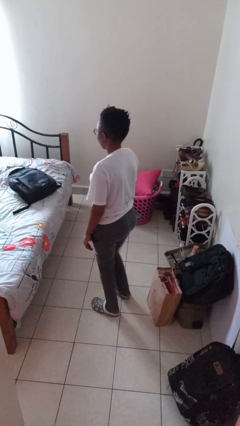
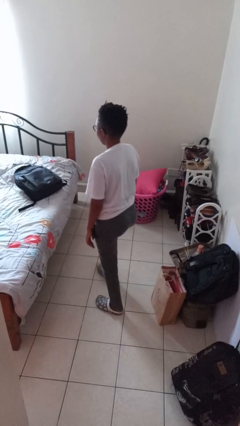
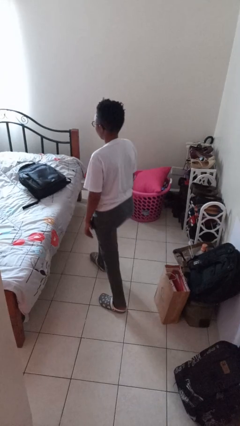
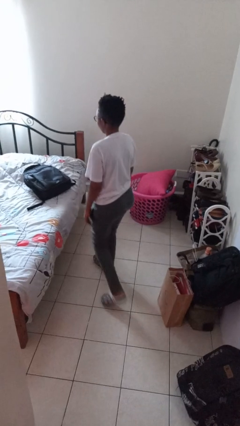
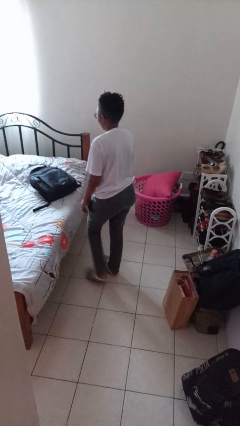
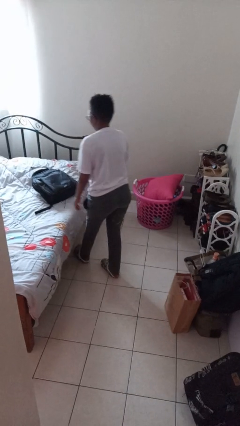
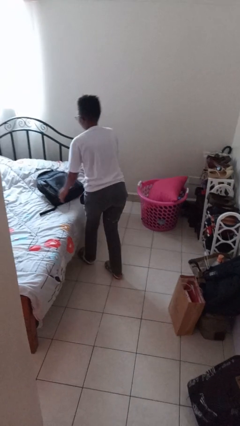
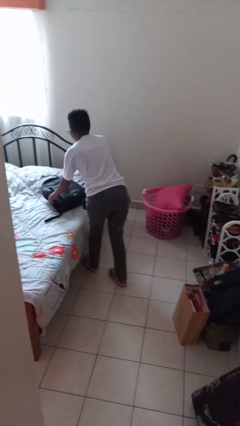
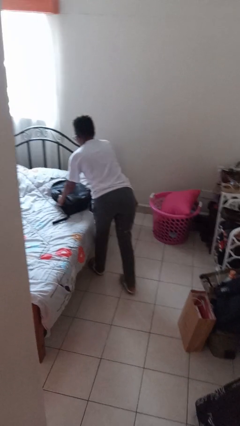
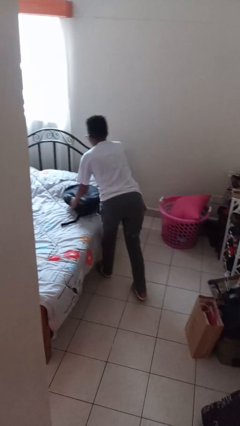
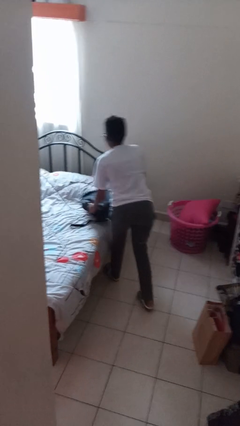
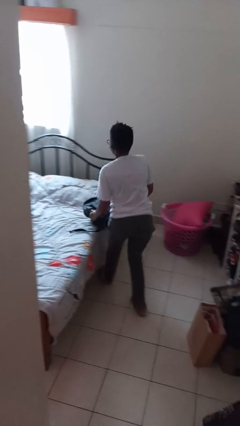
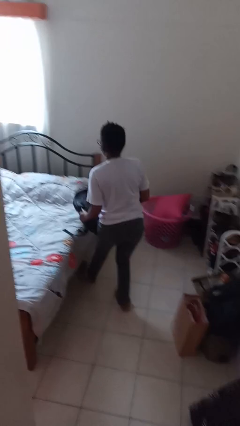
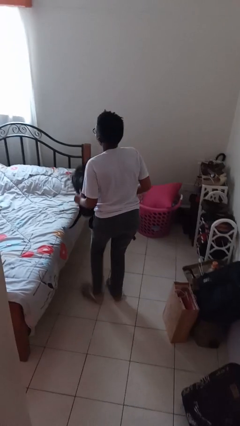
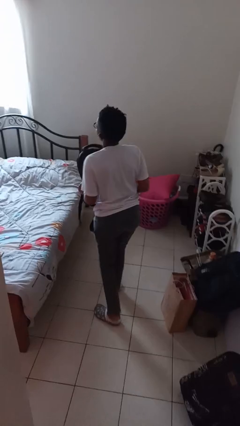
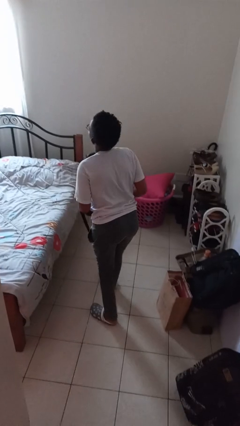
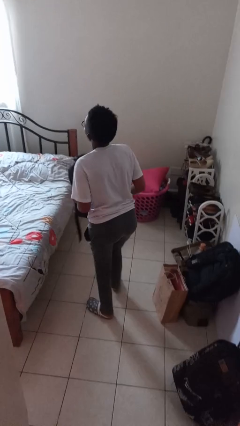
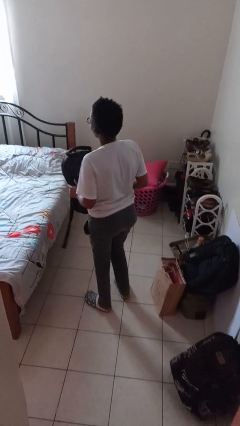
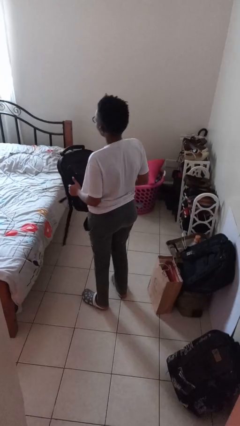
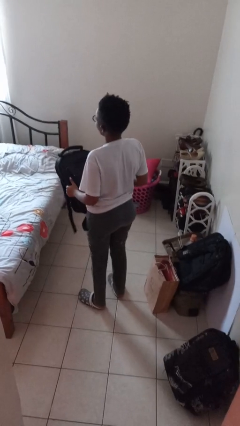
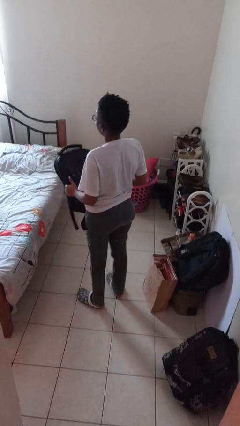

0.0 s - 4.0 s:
person picks up object from bed

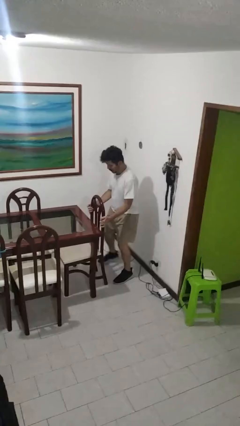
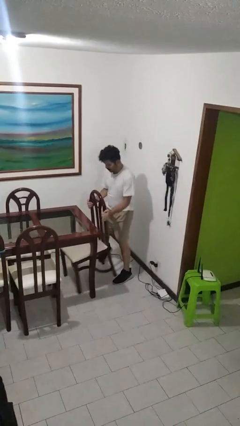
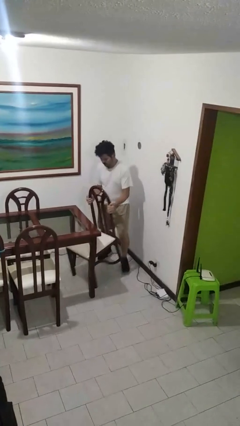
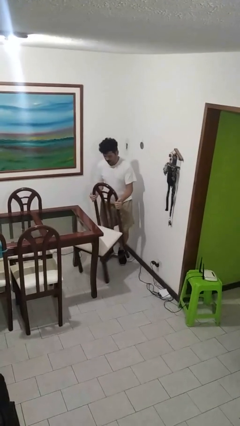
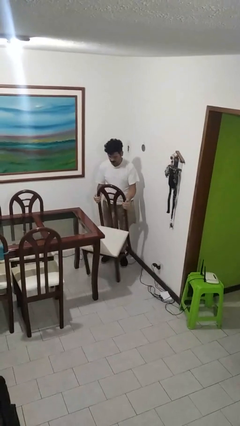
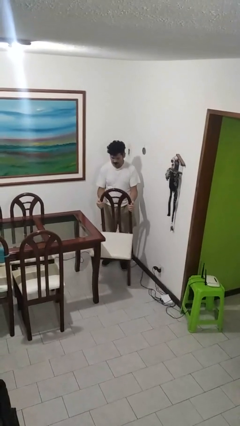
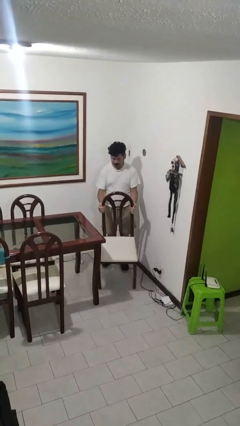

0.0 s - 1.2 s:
person pulls out chair

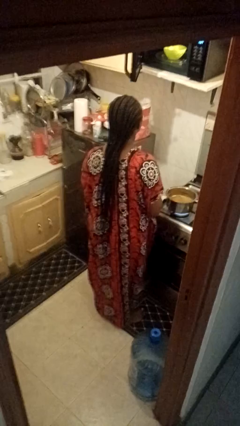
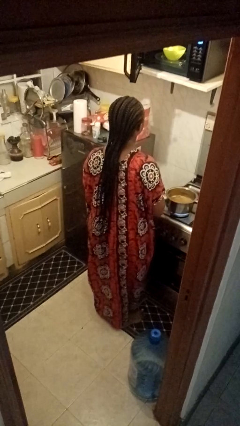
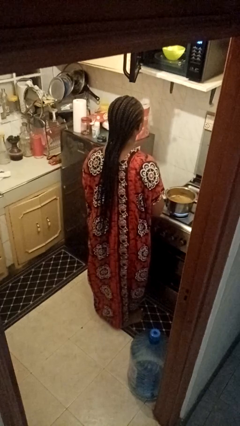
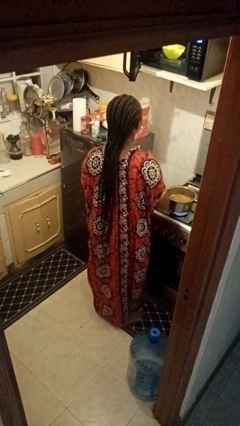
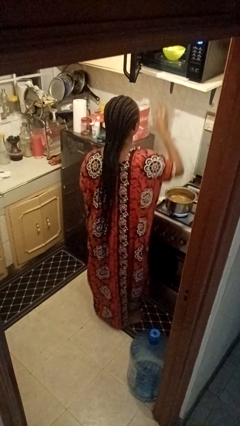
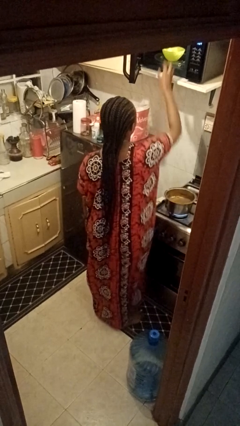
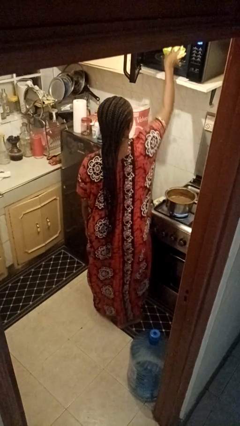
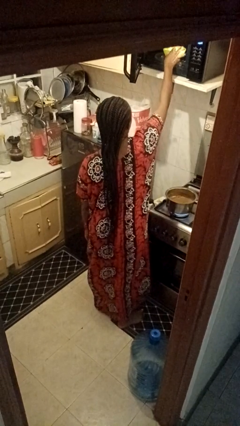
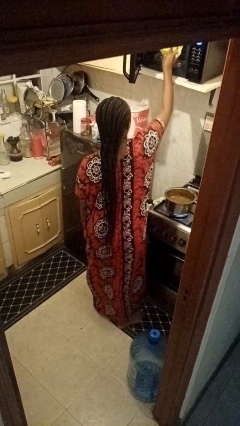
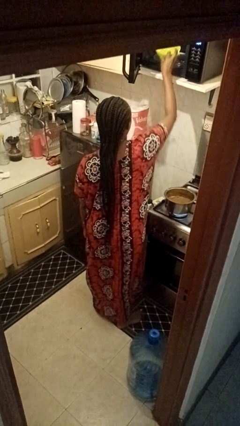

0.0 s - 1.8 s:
person takes object from microwave

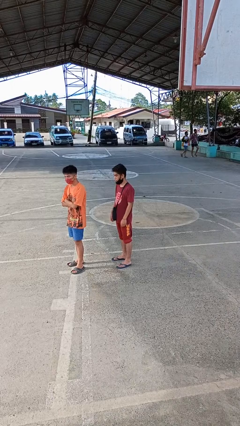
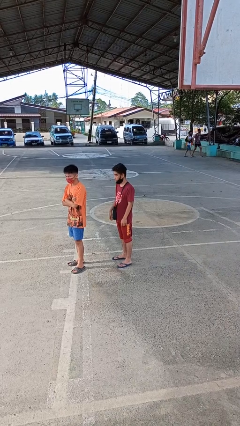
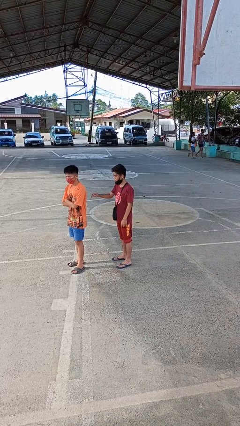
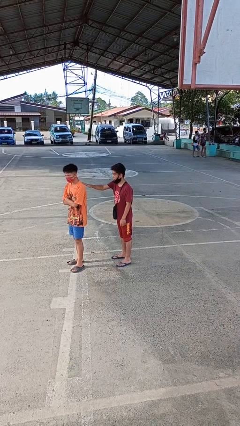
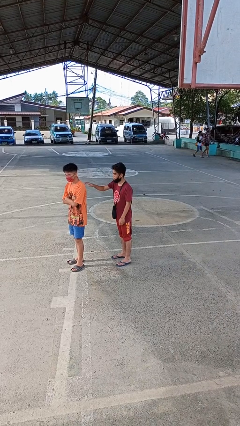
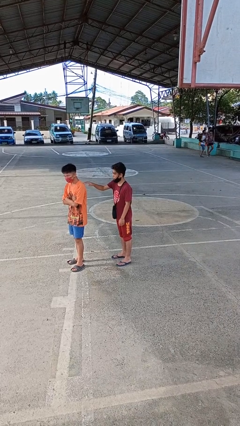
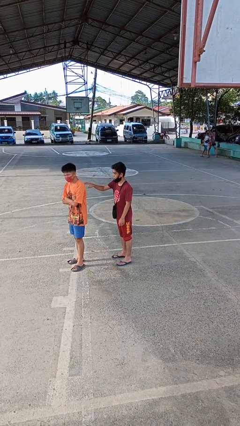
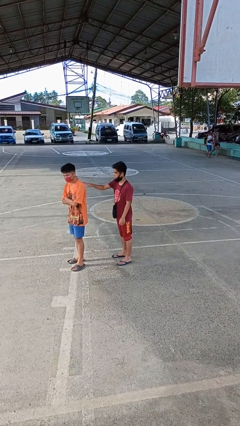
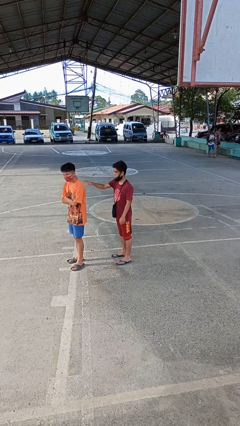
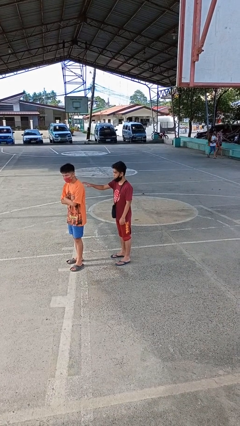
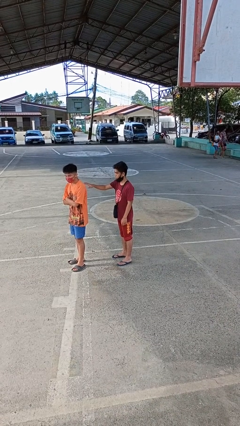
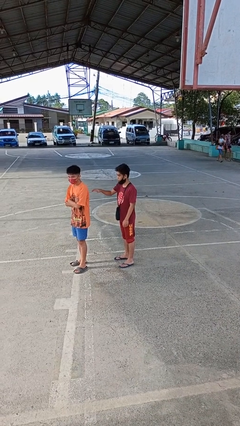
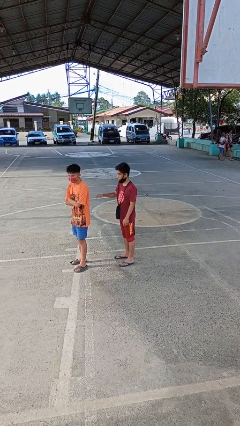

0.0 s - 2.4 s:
person touches back of person

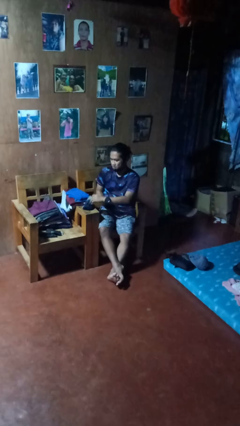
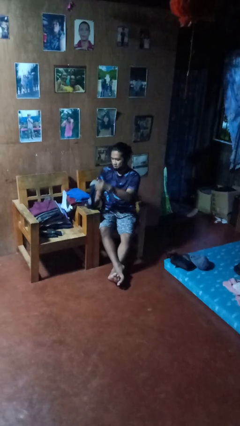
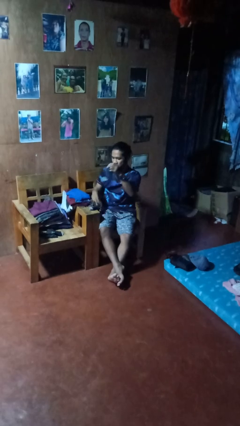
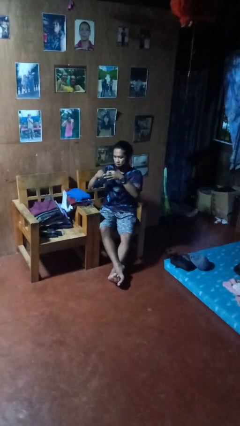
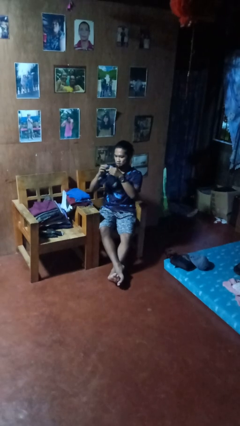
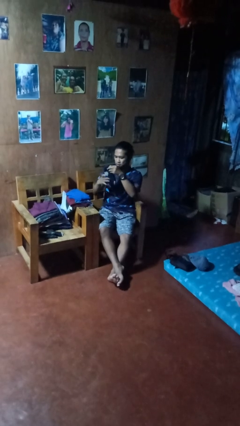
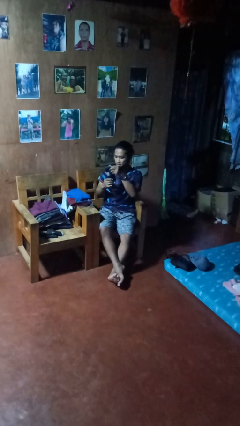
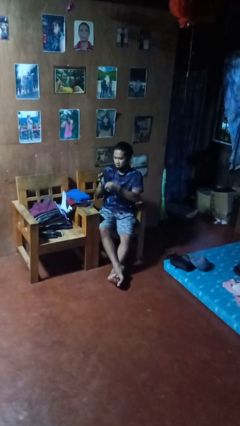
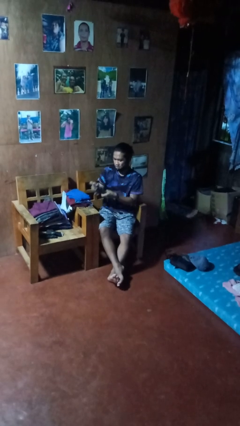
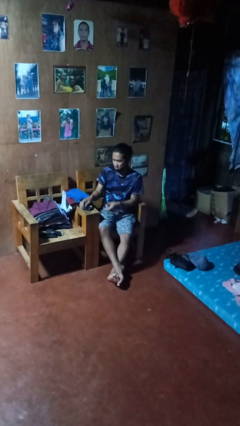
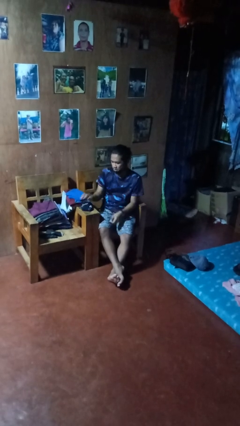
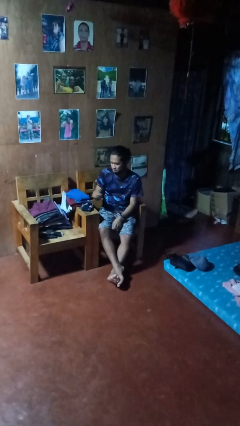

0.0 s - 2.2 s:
person folds socks

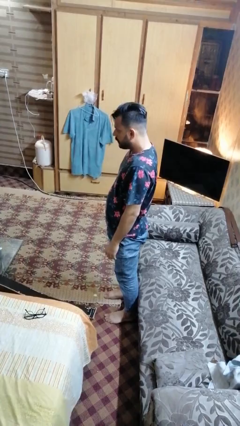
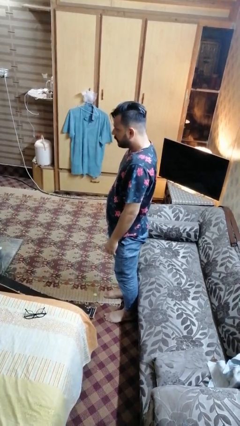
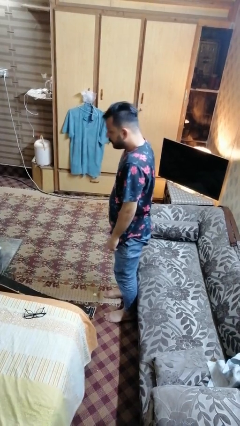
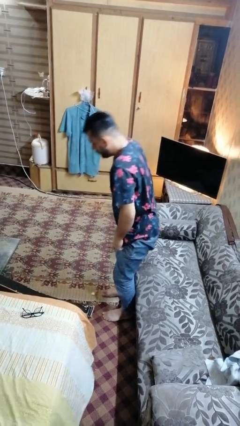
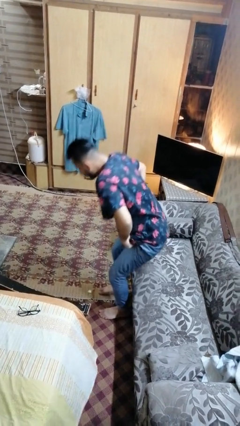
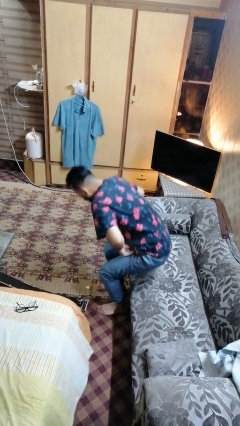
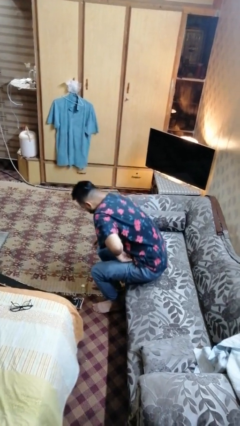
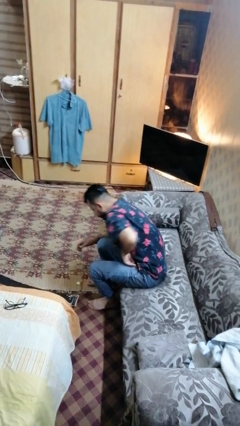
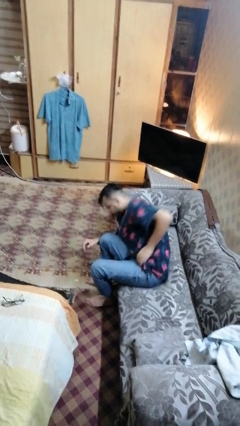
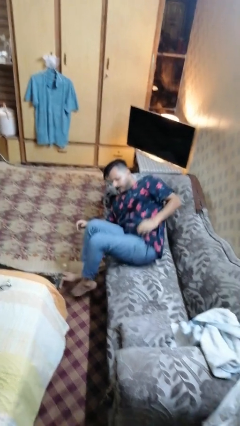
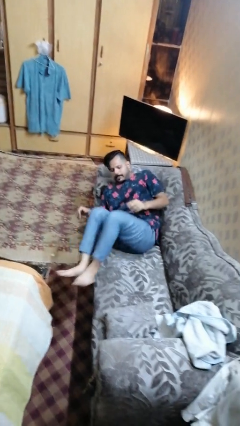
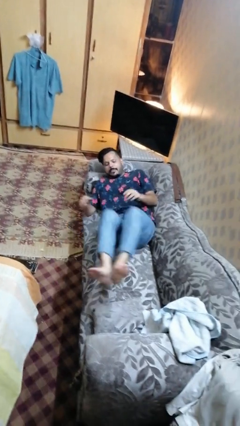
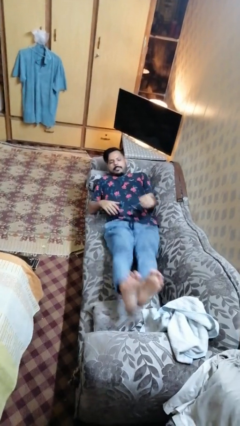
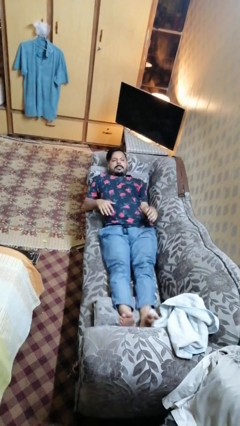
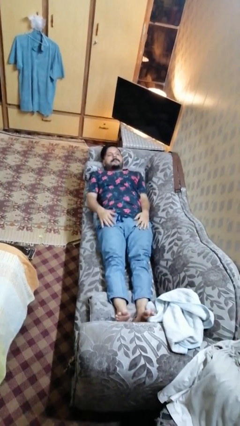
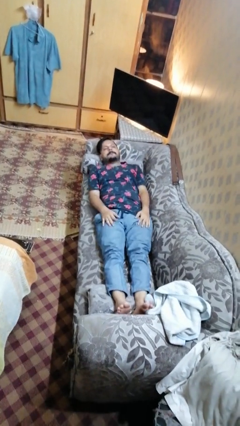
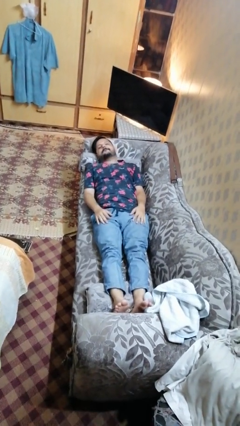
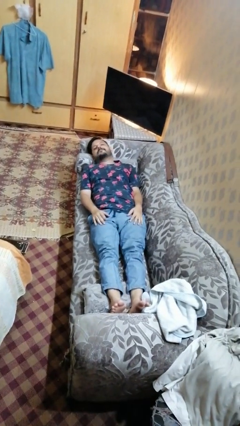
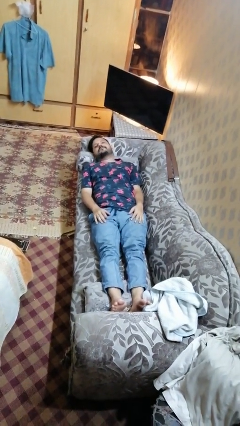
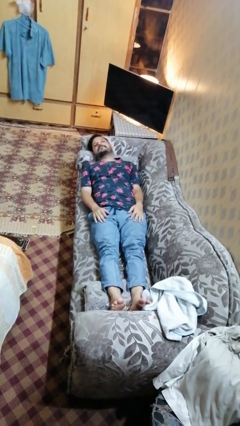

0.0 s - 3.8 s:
person lies down on couch

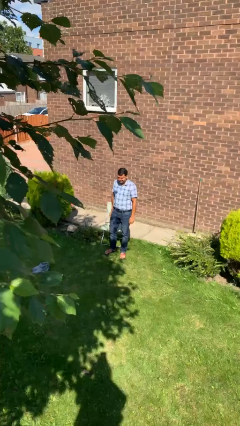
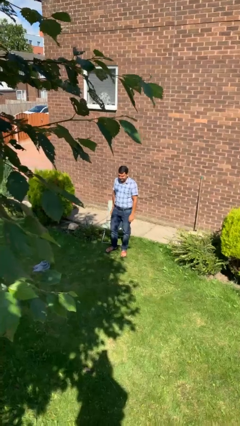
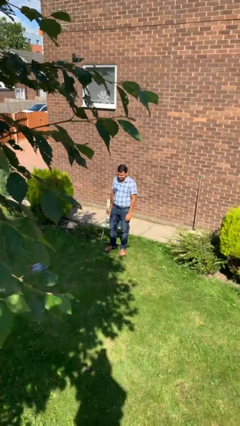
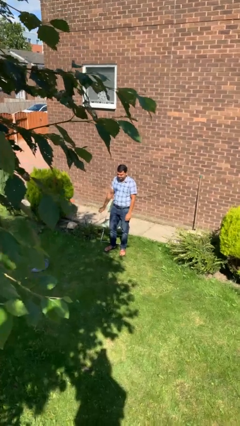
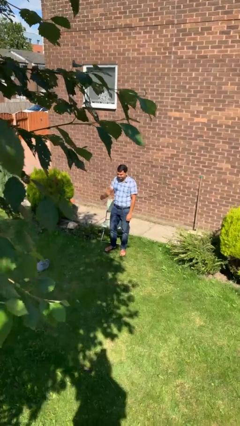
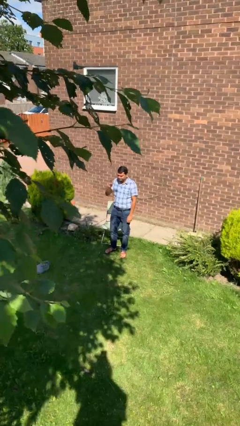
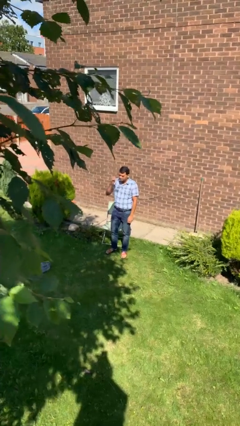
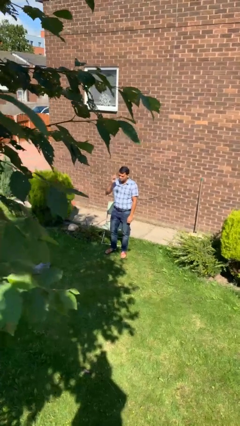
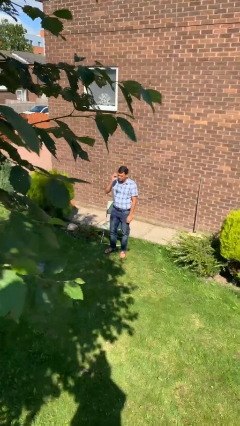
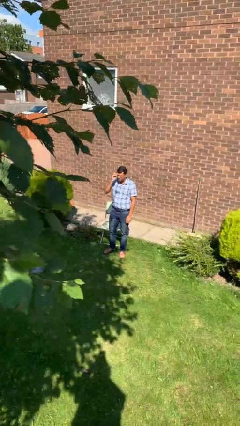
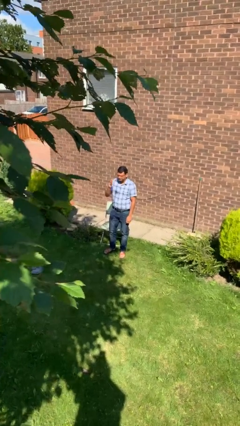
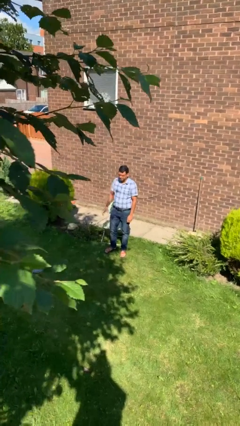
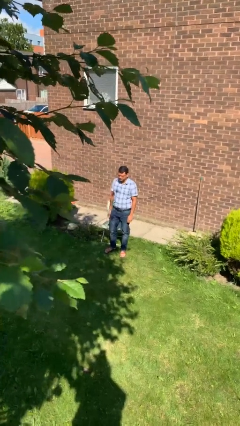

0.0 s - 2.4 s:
person puts on glasses
